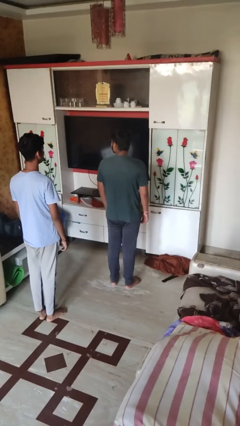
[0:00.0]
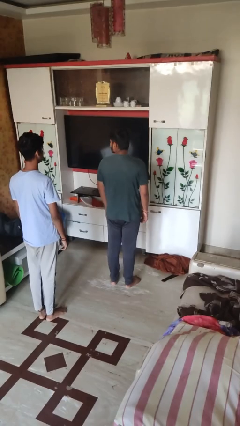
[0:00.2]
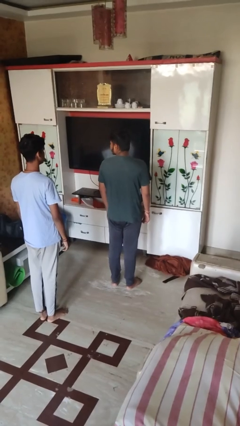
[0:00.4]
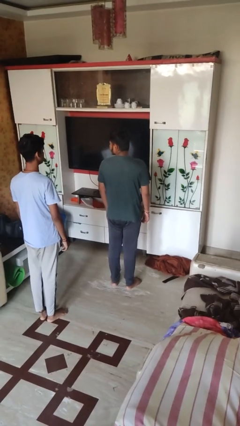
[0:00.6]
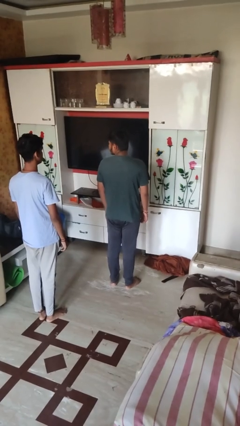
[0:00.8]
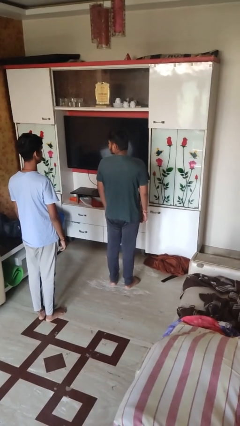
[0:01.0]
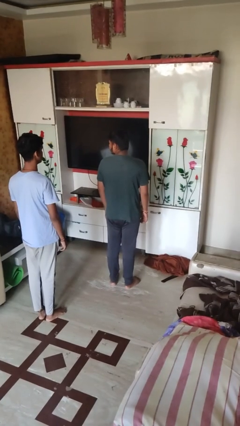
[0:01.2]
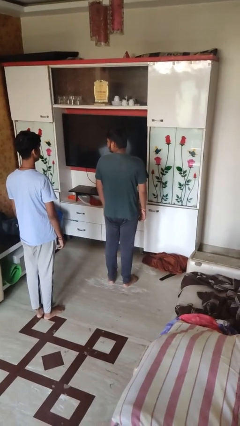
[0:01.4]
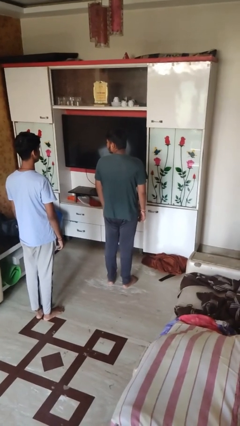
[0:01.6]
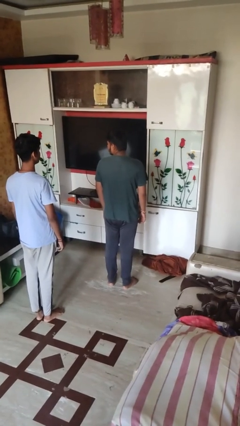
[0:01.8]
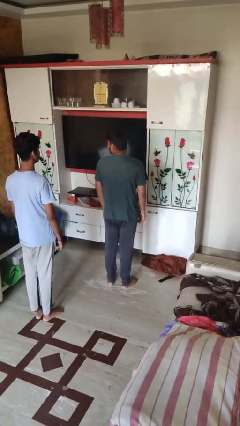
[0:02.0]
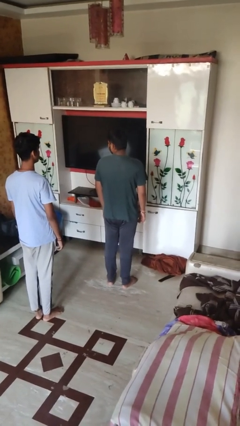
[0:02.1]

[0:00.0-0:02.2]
person looks over shoulder

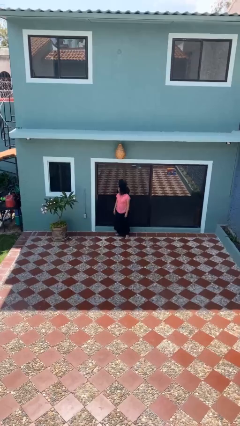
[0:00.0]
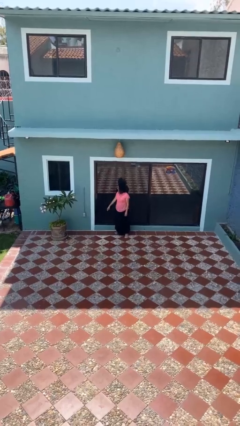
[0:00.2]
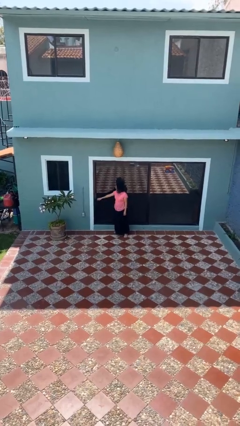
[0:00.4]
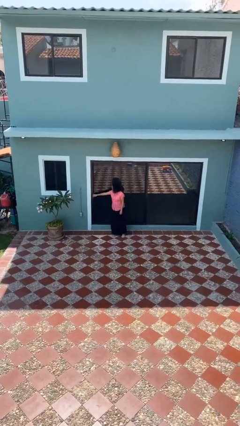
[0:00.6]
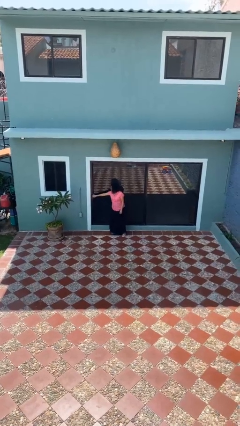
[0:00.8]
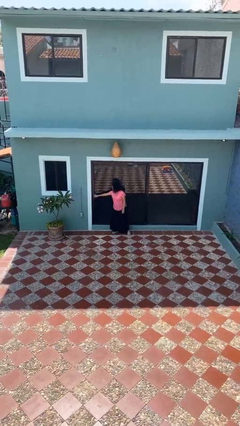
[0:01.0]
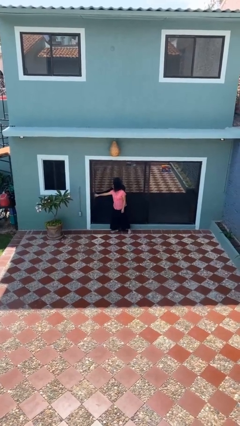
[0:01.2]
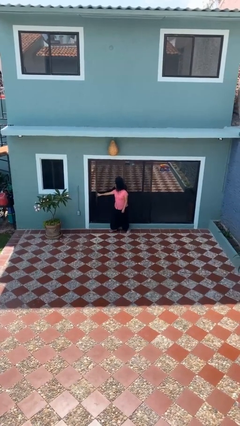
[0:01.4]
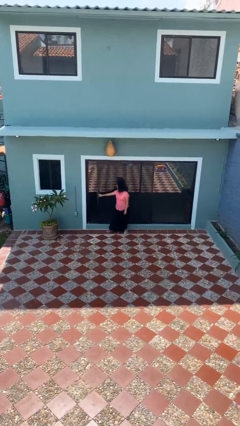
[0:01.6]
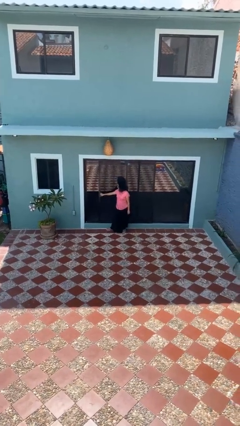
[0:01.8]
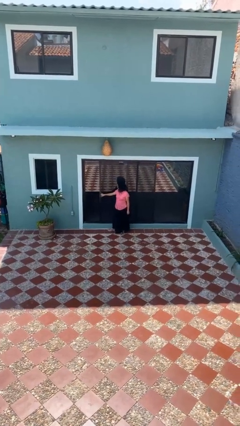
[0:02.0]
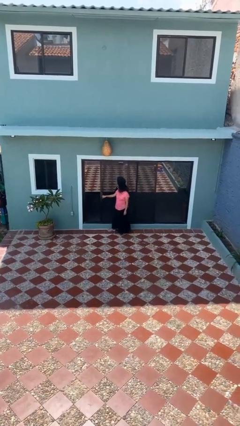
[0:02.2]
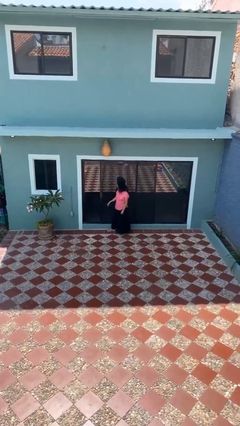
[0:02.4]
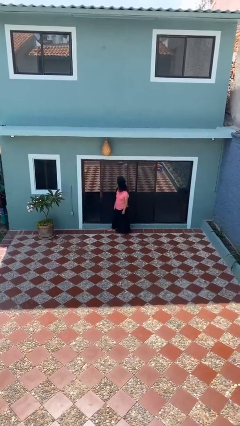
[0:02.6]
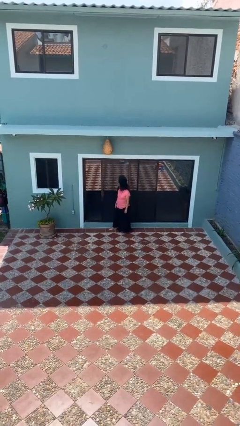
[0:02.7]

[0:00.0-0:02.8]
person opens sliding door

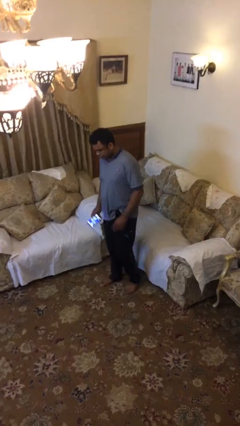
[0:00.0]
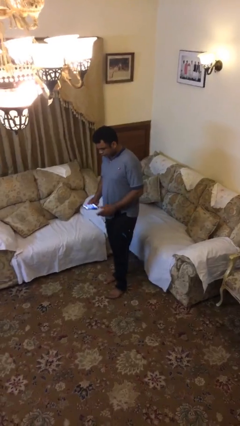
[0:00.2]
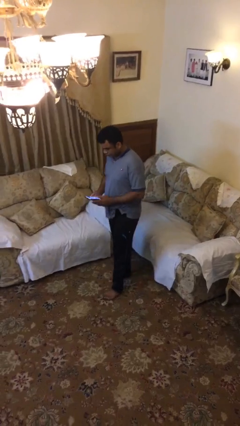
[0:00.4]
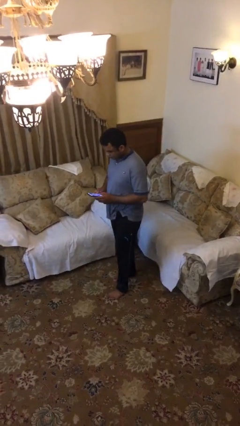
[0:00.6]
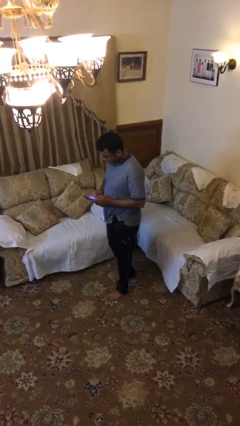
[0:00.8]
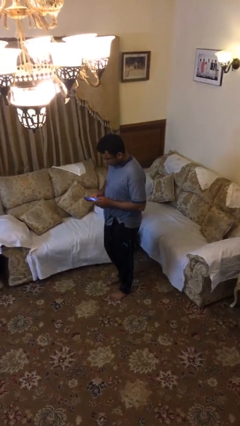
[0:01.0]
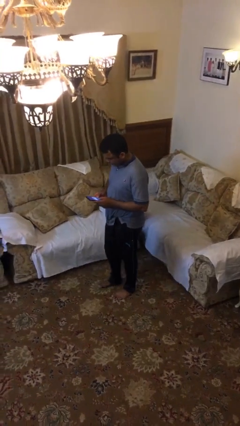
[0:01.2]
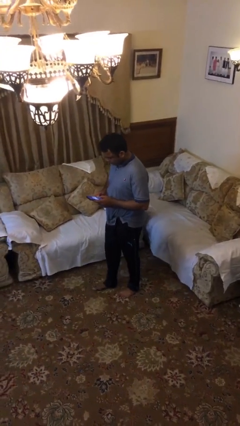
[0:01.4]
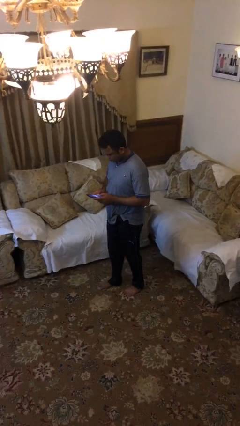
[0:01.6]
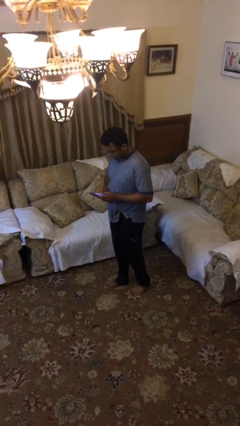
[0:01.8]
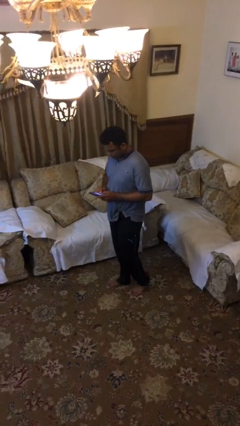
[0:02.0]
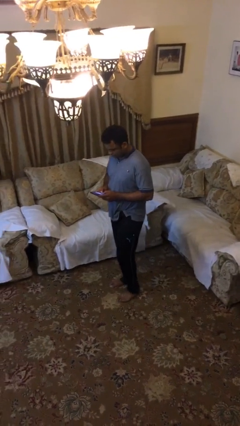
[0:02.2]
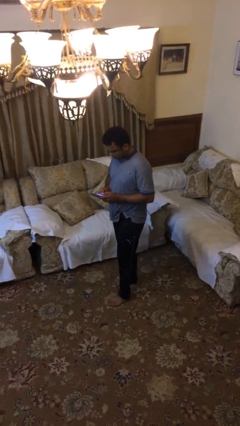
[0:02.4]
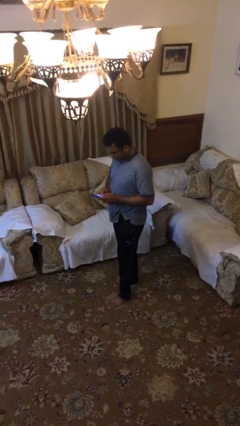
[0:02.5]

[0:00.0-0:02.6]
person texts on phone

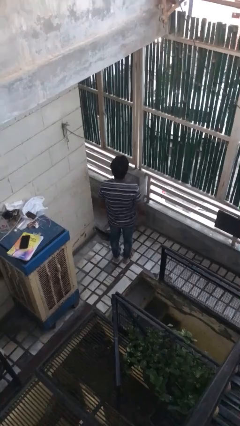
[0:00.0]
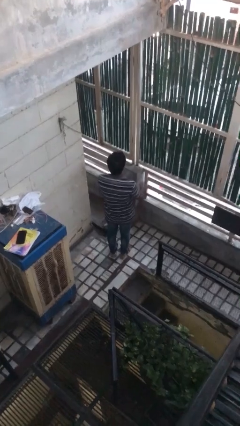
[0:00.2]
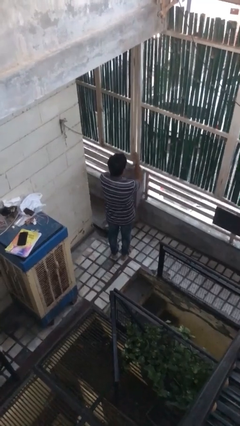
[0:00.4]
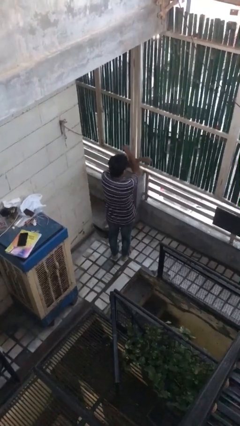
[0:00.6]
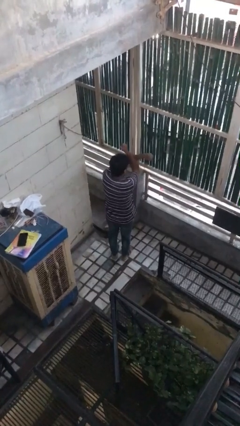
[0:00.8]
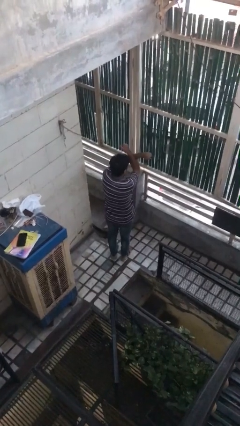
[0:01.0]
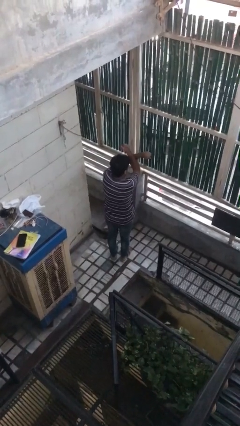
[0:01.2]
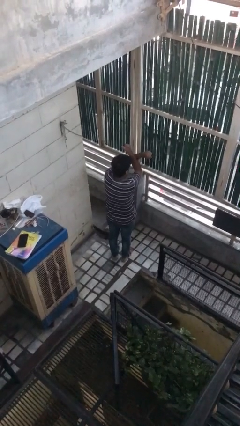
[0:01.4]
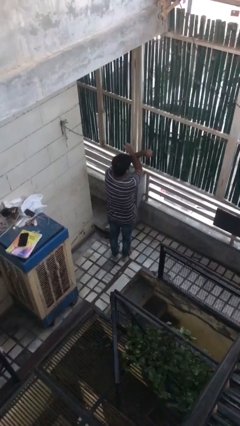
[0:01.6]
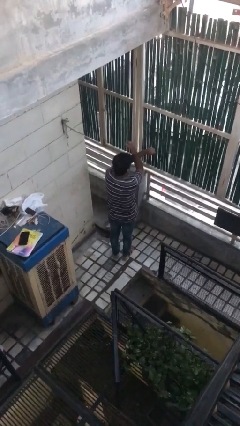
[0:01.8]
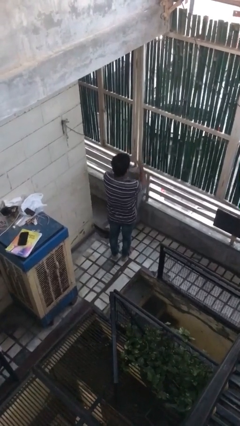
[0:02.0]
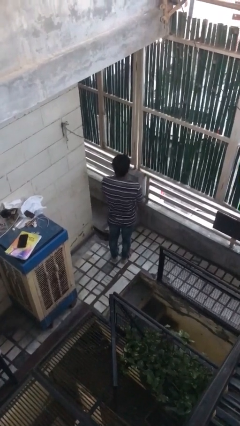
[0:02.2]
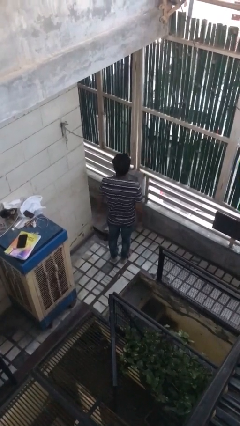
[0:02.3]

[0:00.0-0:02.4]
person gestures arms x

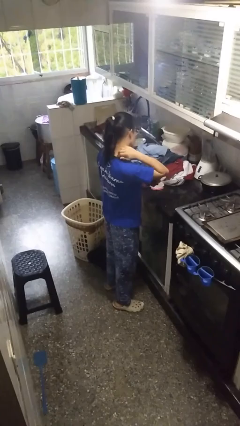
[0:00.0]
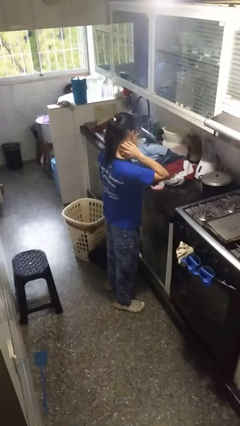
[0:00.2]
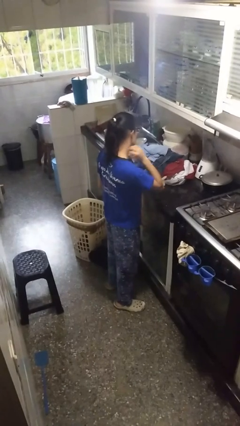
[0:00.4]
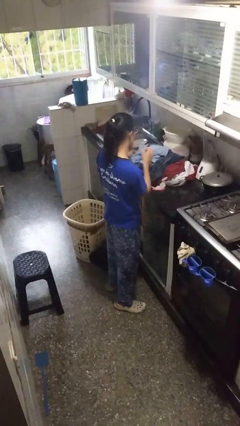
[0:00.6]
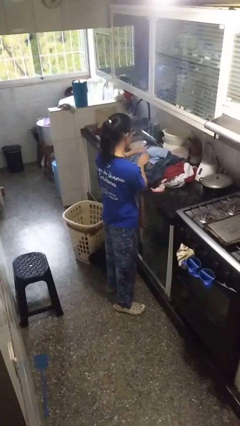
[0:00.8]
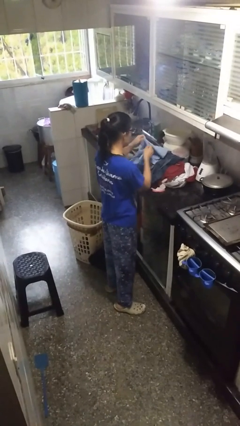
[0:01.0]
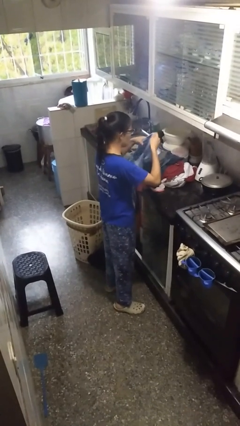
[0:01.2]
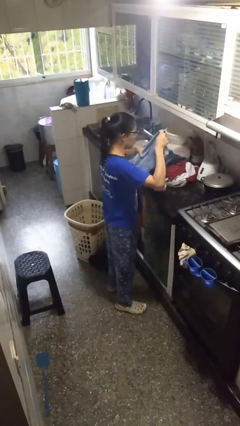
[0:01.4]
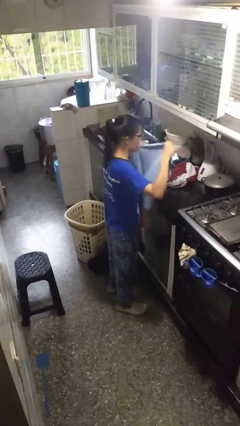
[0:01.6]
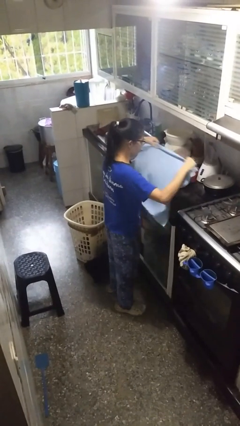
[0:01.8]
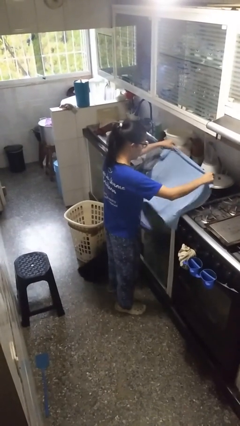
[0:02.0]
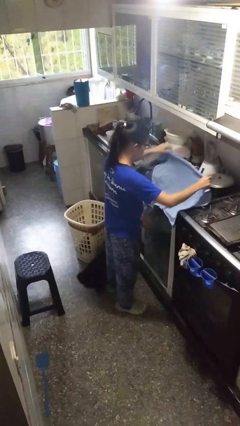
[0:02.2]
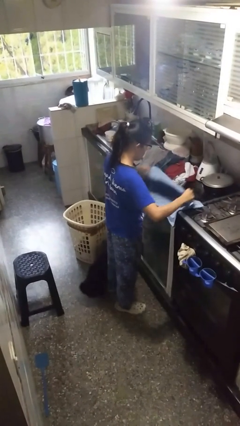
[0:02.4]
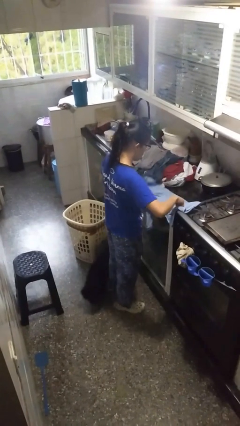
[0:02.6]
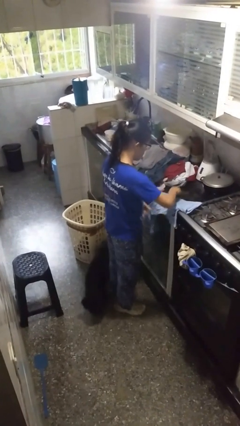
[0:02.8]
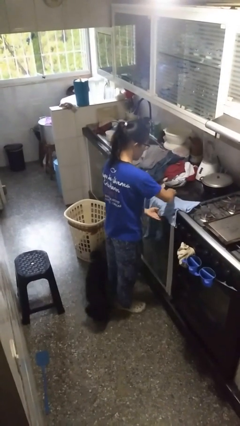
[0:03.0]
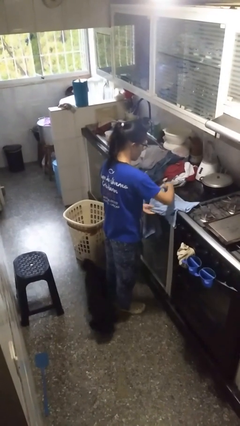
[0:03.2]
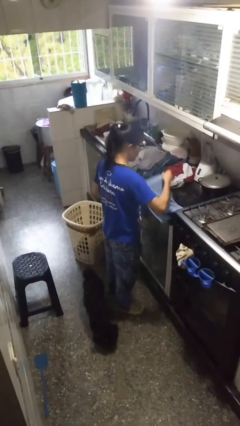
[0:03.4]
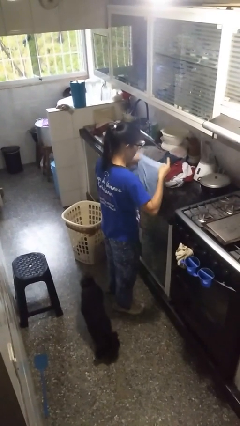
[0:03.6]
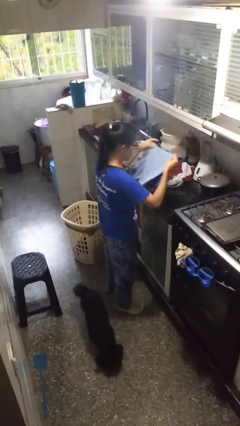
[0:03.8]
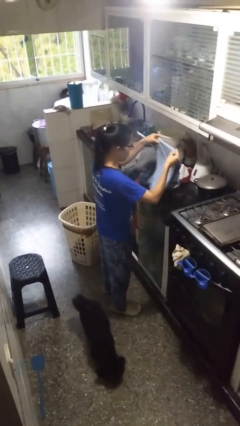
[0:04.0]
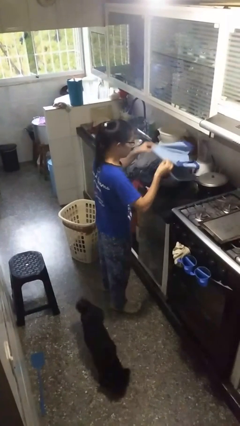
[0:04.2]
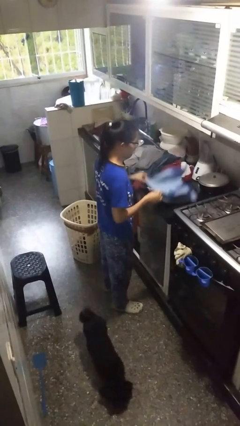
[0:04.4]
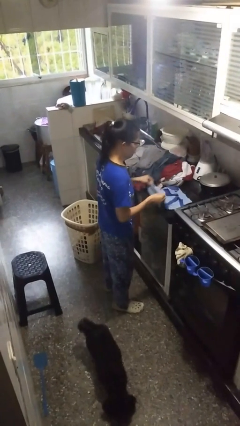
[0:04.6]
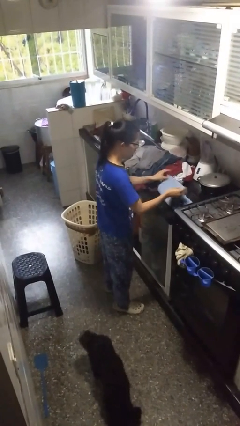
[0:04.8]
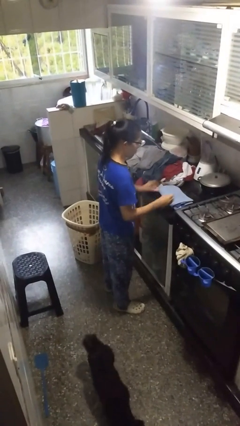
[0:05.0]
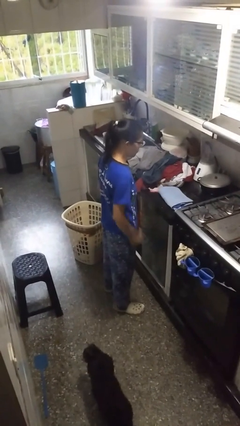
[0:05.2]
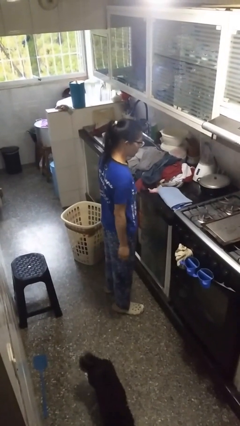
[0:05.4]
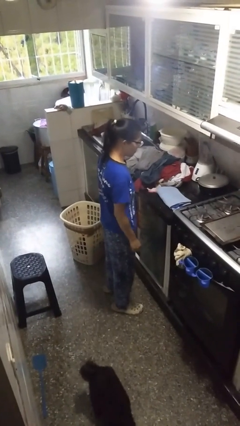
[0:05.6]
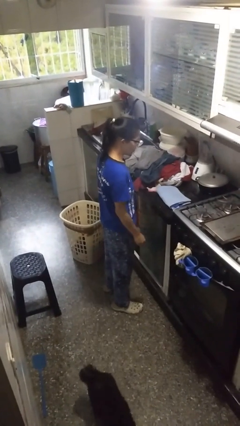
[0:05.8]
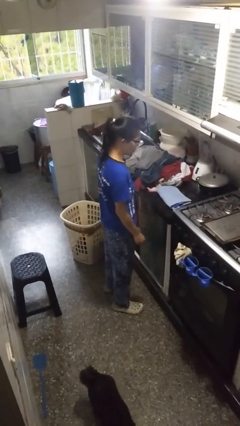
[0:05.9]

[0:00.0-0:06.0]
person folds shirt

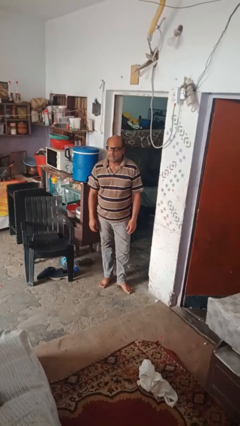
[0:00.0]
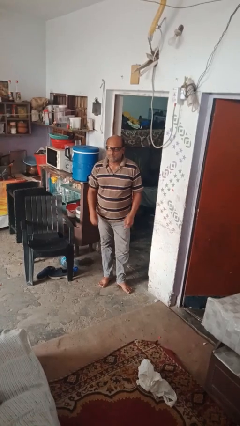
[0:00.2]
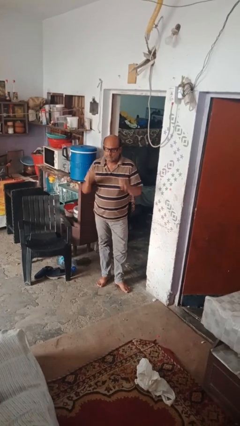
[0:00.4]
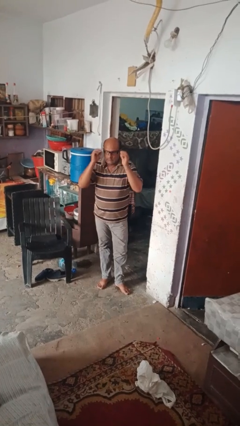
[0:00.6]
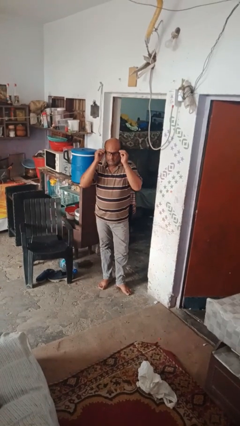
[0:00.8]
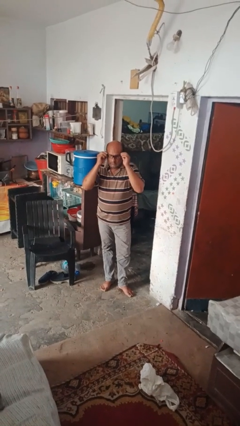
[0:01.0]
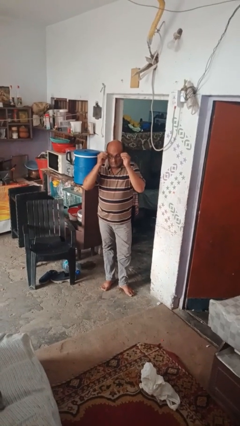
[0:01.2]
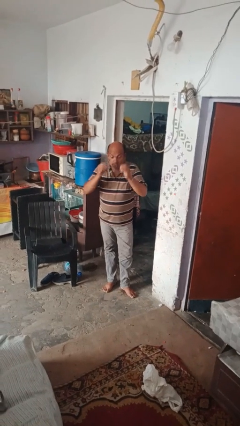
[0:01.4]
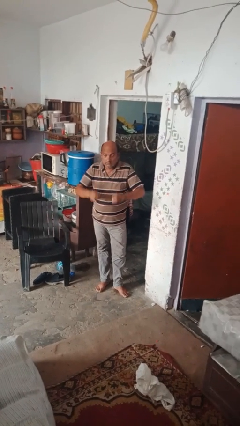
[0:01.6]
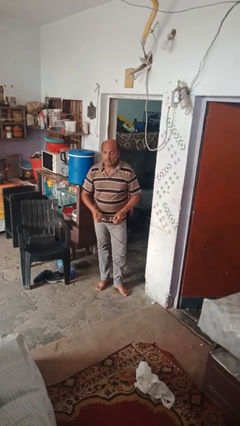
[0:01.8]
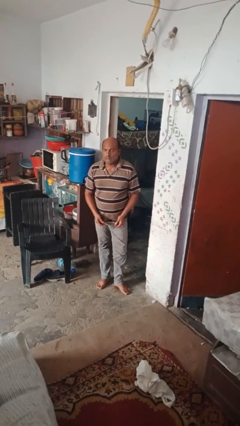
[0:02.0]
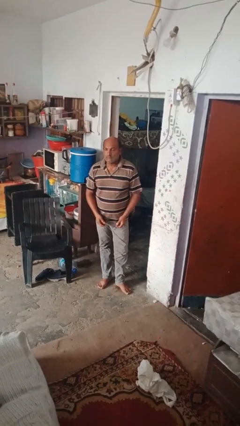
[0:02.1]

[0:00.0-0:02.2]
person takes off glasses
